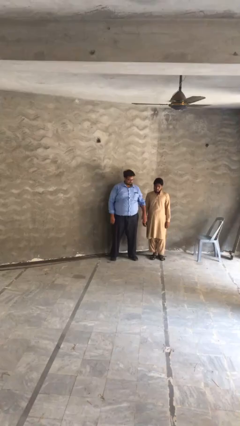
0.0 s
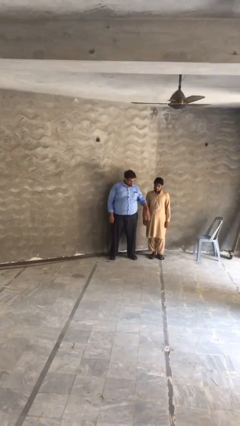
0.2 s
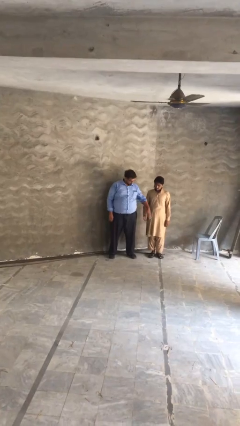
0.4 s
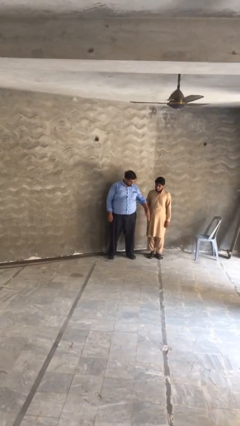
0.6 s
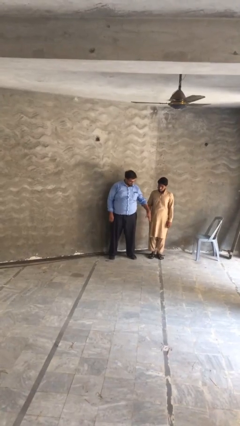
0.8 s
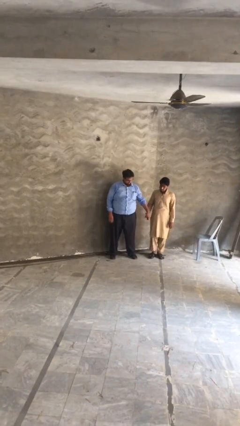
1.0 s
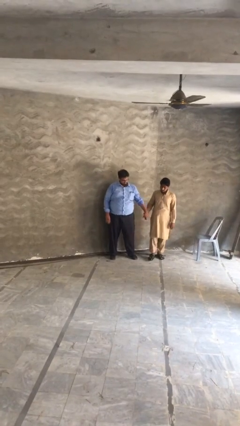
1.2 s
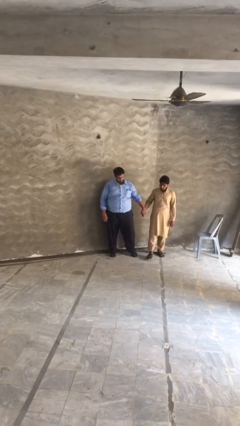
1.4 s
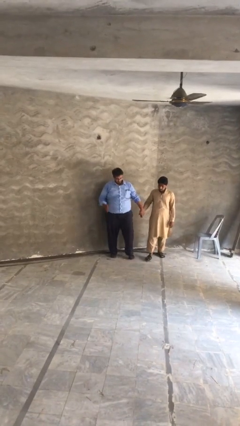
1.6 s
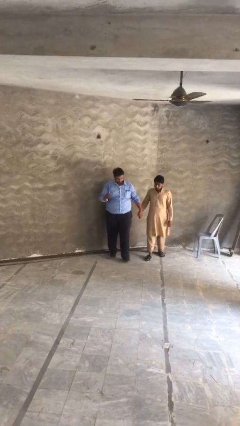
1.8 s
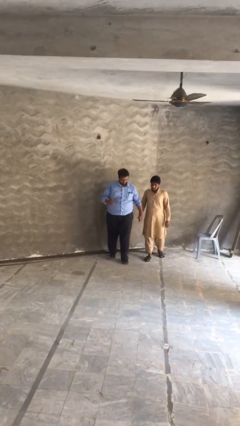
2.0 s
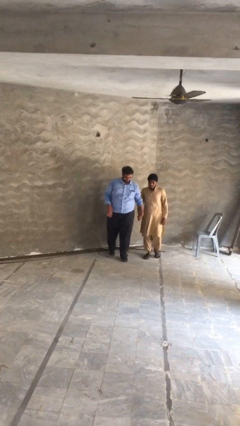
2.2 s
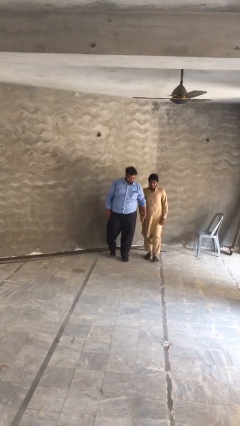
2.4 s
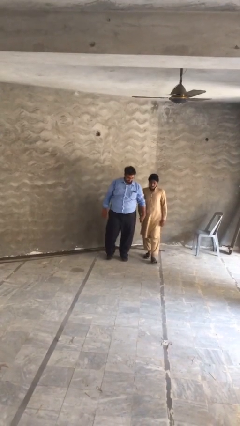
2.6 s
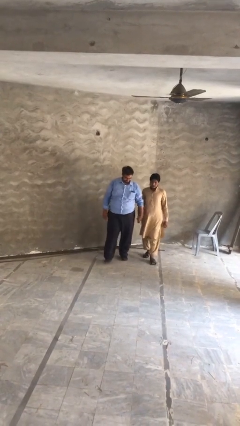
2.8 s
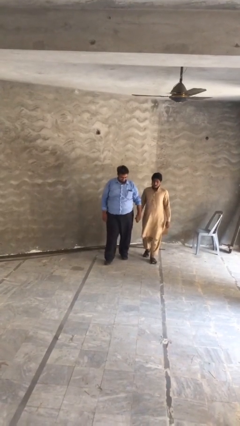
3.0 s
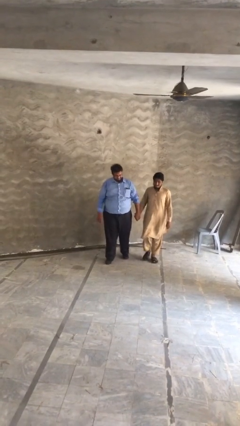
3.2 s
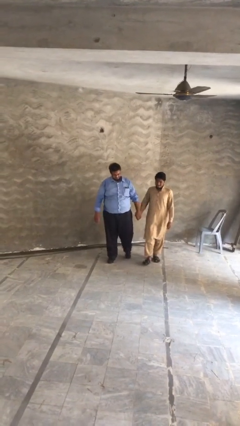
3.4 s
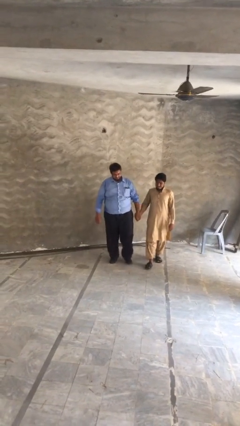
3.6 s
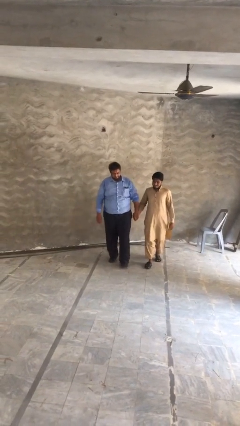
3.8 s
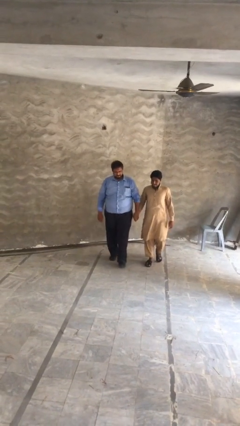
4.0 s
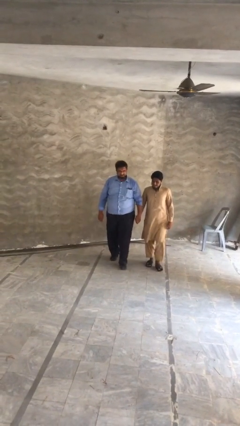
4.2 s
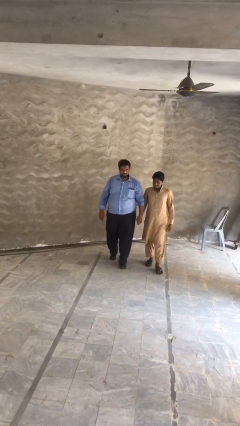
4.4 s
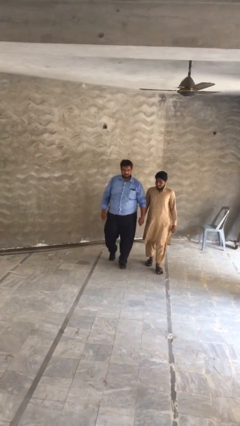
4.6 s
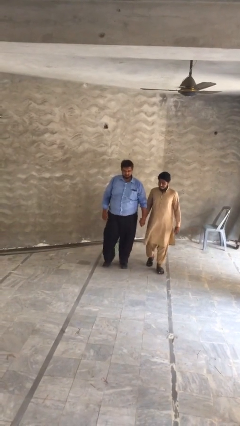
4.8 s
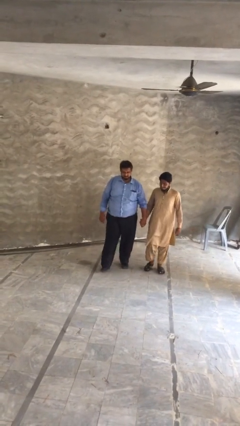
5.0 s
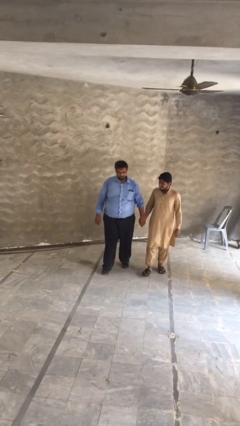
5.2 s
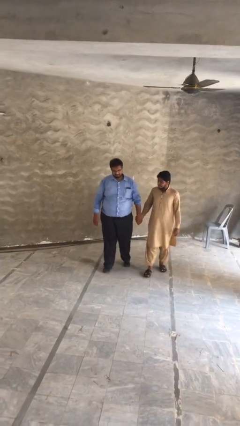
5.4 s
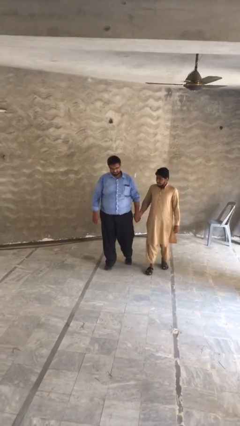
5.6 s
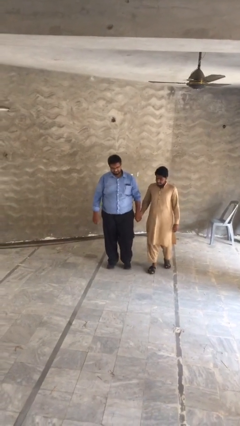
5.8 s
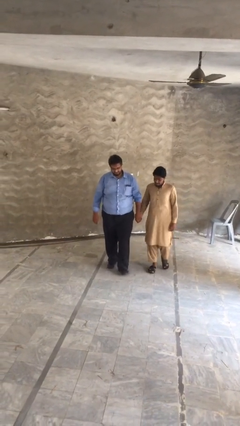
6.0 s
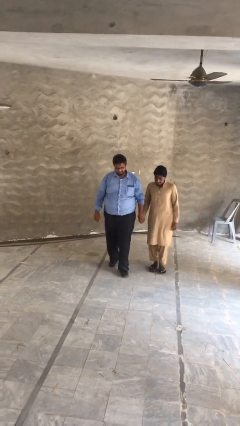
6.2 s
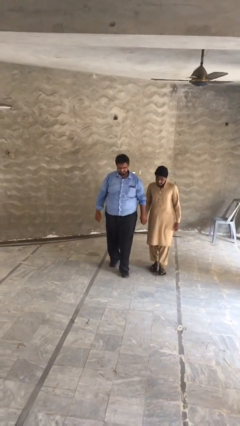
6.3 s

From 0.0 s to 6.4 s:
person holds hand

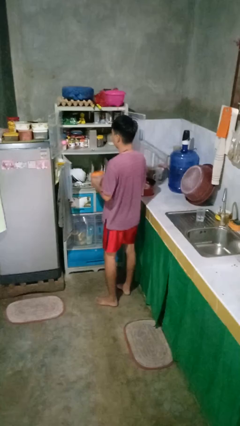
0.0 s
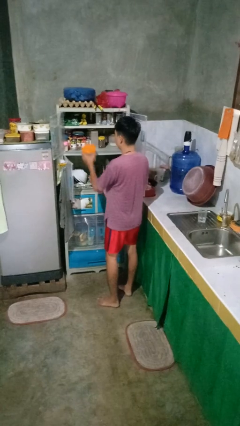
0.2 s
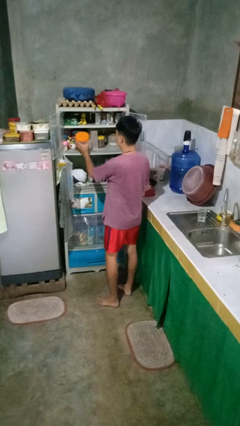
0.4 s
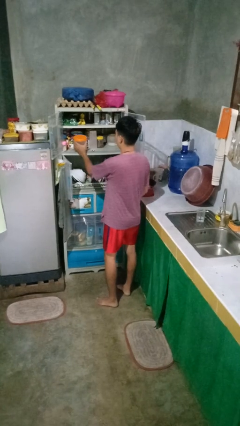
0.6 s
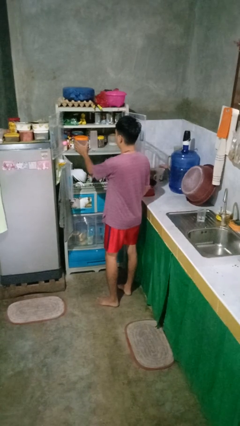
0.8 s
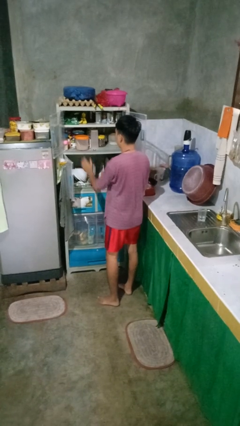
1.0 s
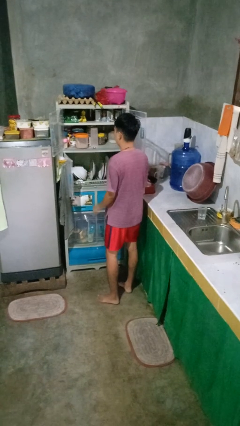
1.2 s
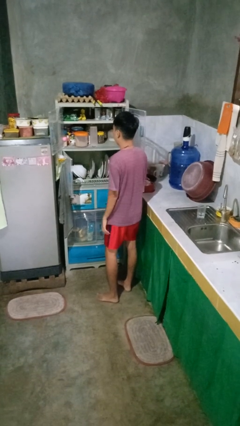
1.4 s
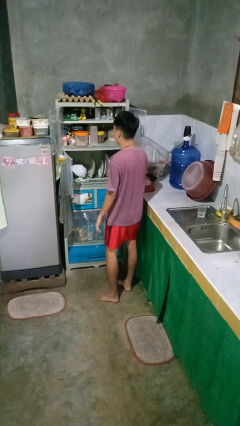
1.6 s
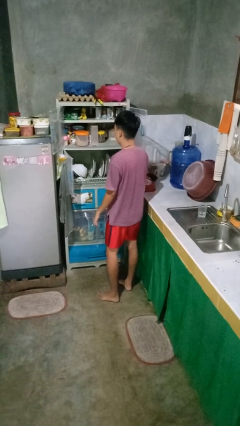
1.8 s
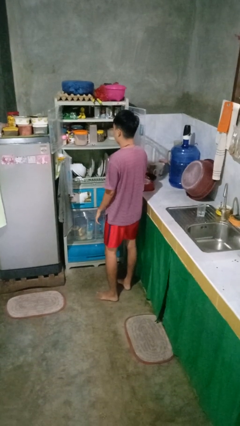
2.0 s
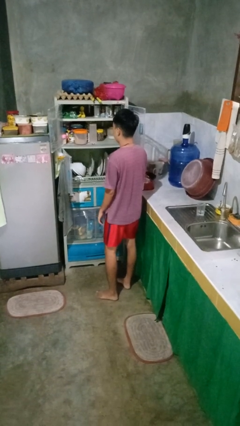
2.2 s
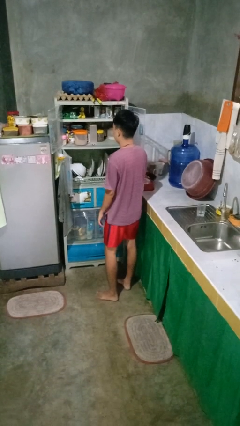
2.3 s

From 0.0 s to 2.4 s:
person puts object in cabinet

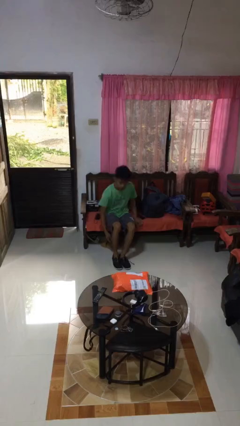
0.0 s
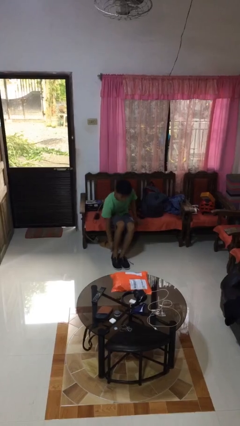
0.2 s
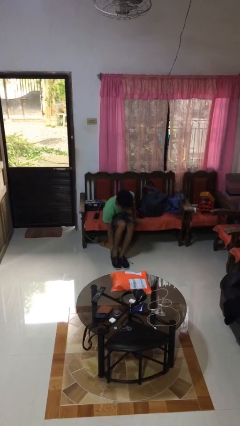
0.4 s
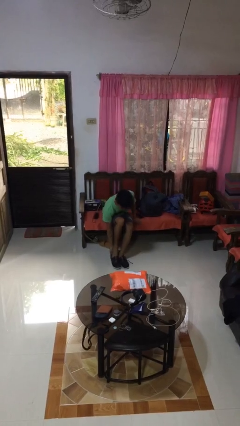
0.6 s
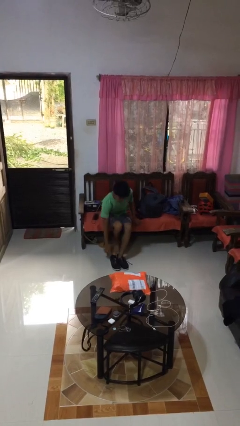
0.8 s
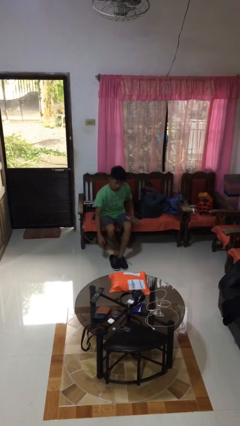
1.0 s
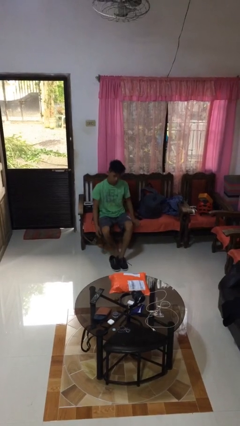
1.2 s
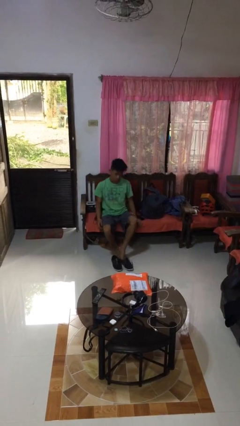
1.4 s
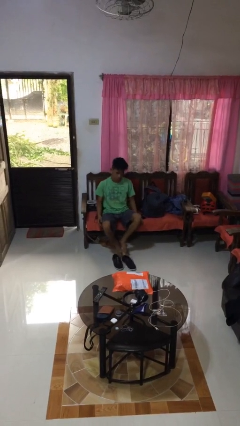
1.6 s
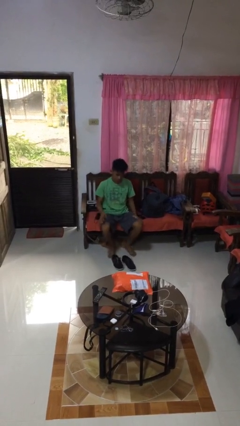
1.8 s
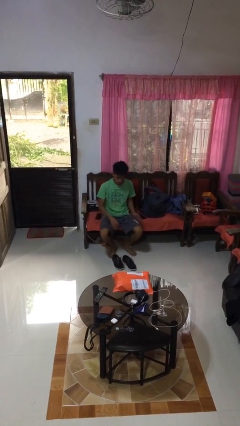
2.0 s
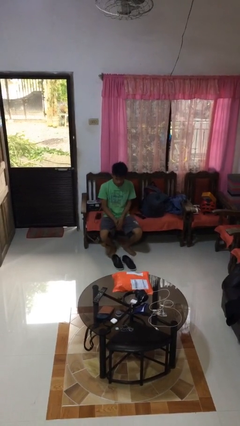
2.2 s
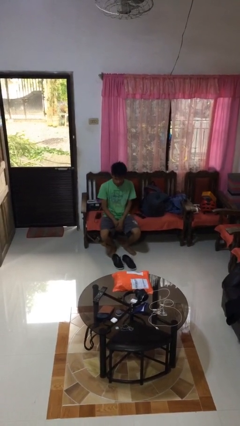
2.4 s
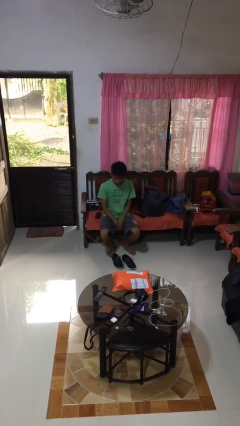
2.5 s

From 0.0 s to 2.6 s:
person takes off shoes

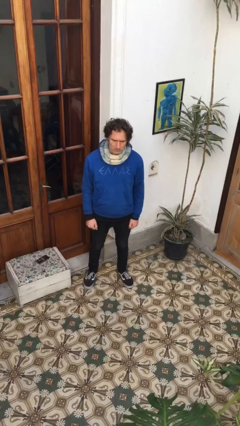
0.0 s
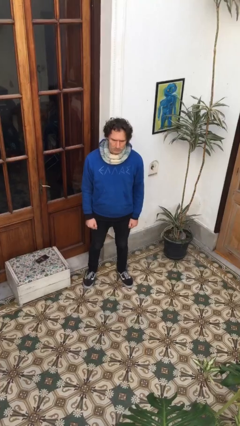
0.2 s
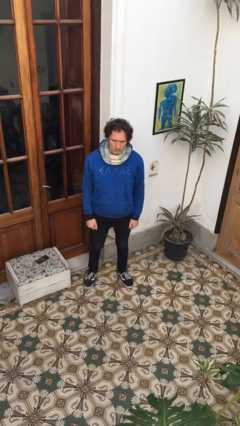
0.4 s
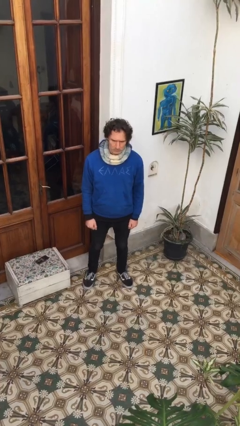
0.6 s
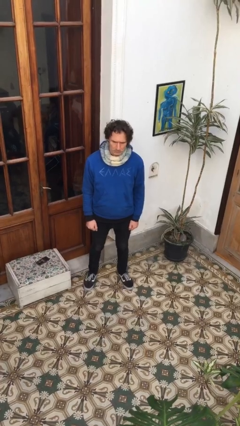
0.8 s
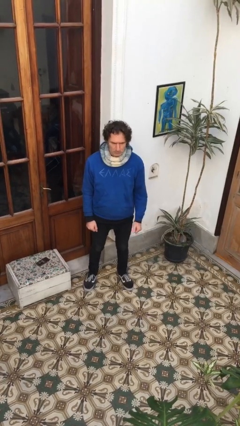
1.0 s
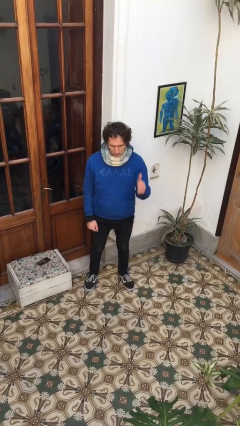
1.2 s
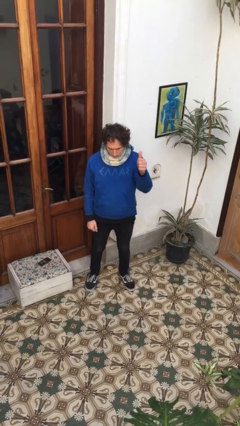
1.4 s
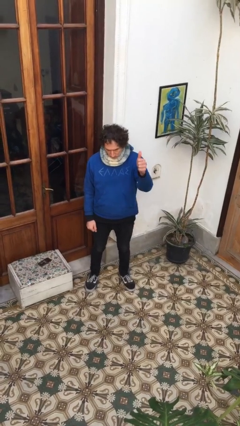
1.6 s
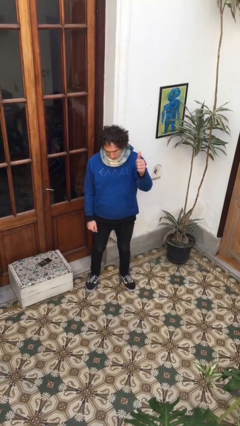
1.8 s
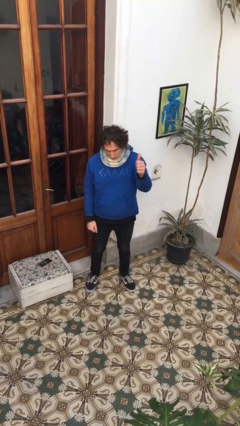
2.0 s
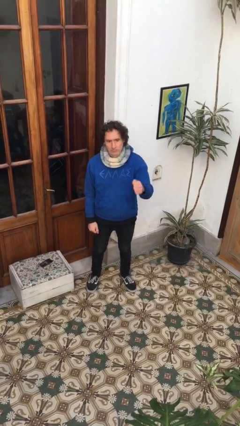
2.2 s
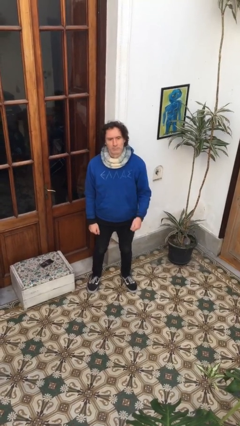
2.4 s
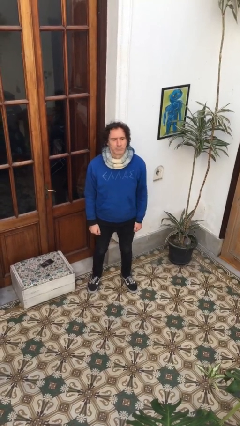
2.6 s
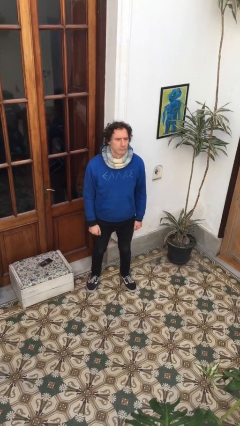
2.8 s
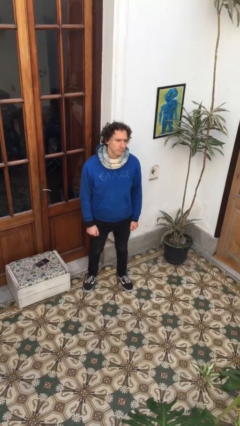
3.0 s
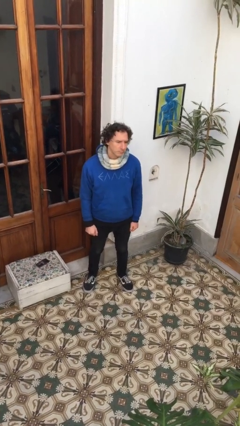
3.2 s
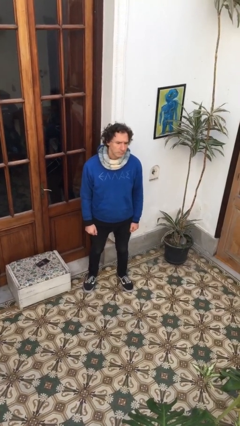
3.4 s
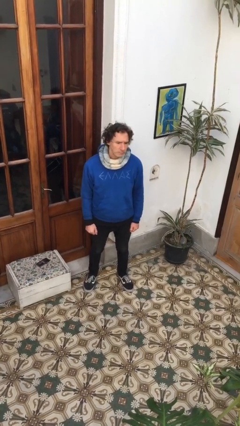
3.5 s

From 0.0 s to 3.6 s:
person gestures thumbs up

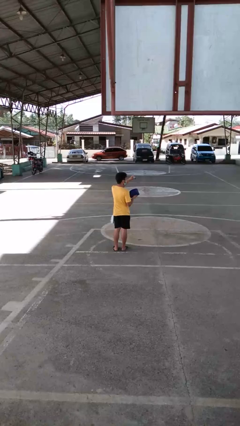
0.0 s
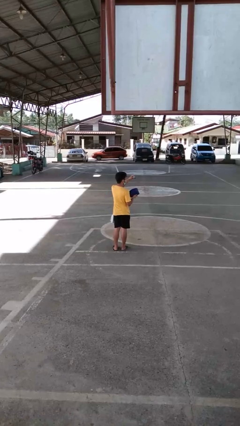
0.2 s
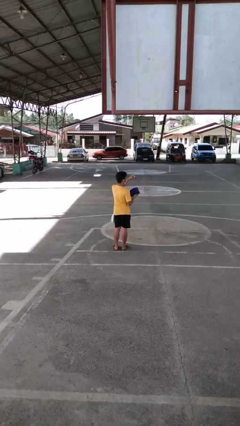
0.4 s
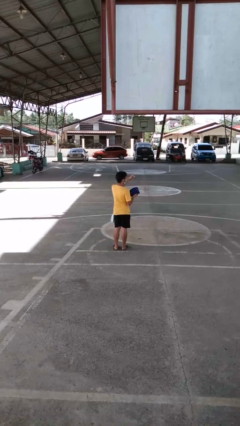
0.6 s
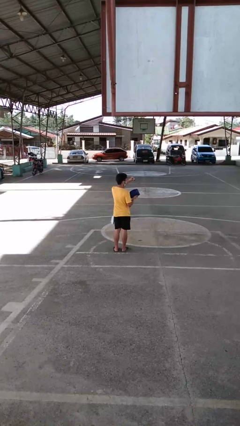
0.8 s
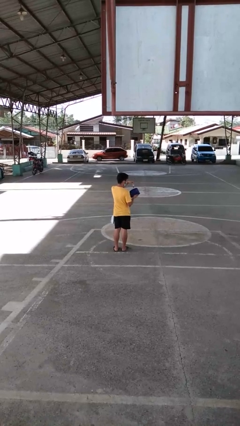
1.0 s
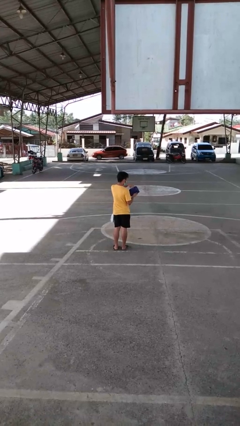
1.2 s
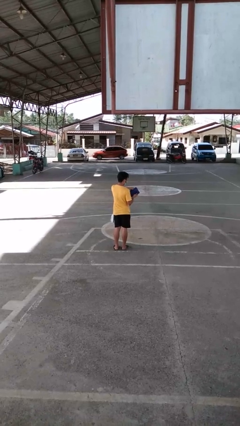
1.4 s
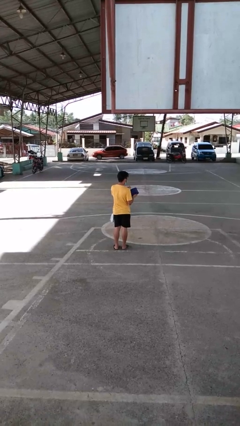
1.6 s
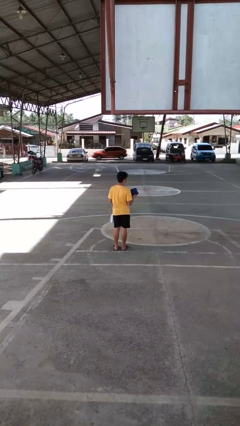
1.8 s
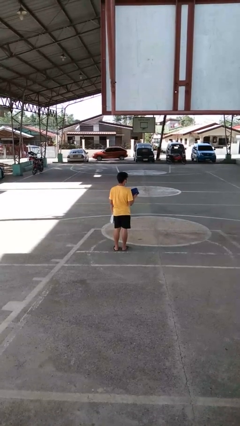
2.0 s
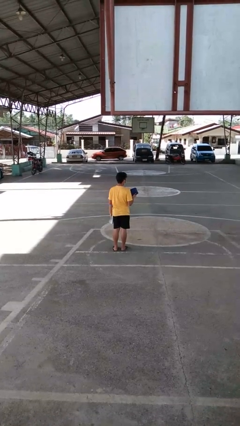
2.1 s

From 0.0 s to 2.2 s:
person puts on glasses

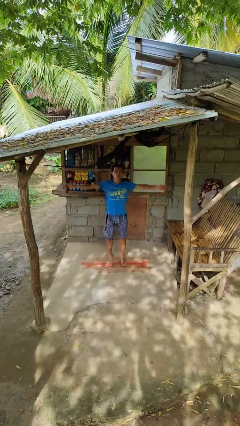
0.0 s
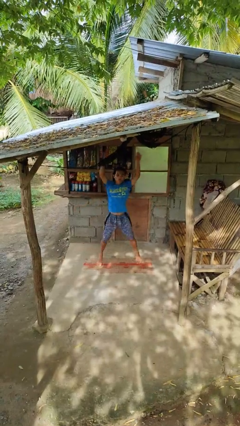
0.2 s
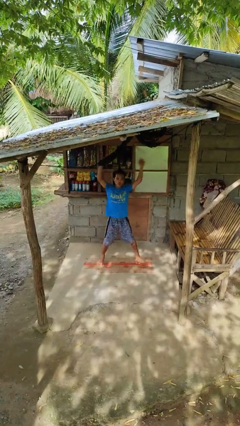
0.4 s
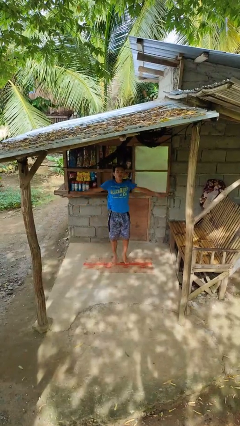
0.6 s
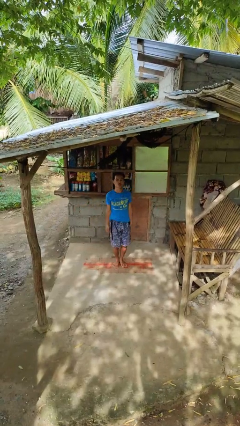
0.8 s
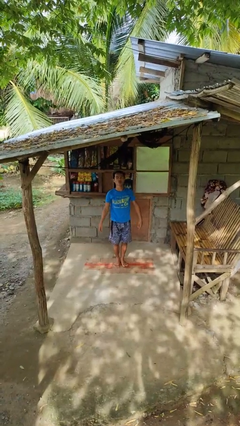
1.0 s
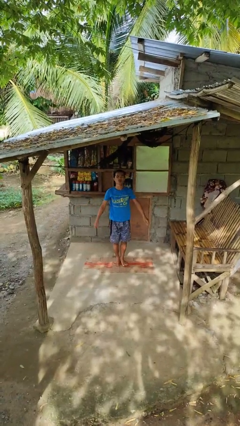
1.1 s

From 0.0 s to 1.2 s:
person exercises with jumping jacks
